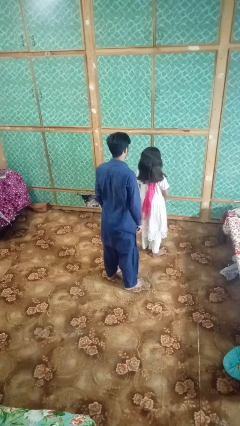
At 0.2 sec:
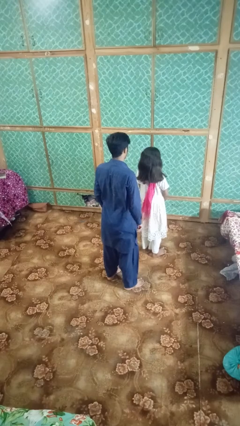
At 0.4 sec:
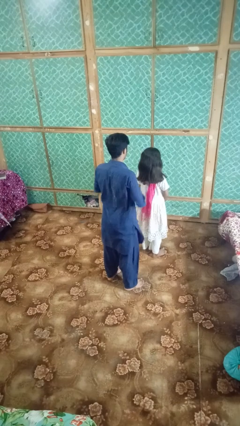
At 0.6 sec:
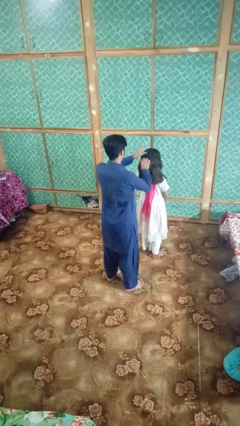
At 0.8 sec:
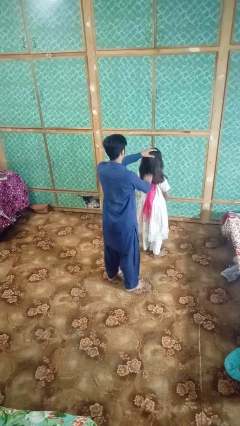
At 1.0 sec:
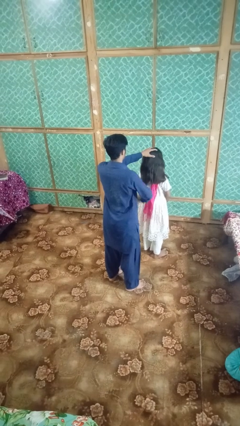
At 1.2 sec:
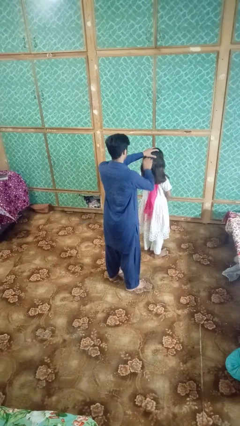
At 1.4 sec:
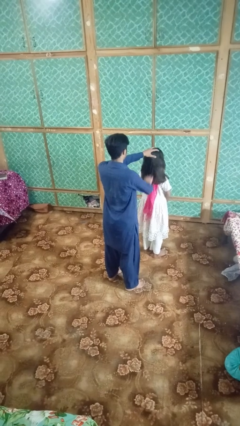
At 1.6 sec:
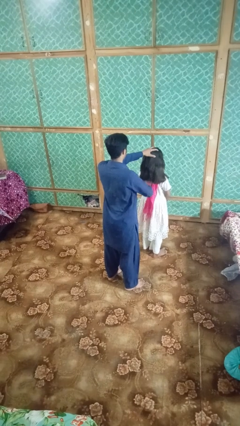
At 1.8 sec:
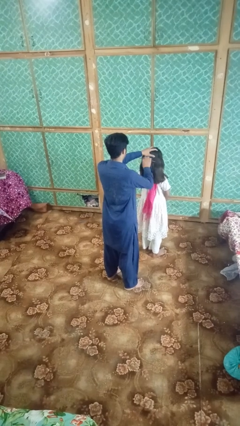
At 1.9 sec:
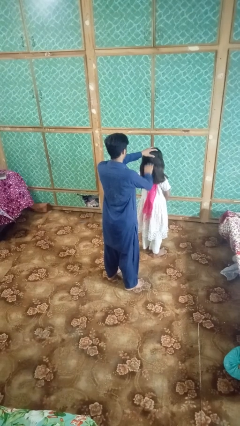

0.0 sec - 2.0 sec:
person brushes hair of person

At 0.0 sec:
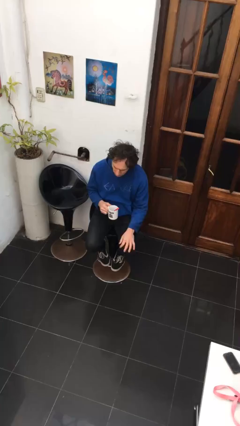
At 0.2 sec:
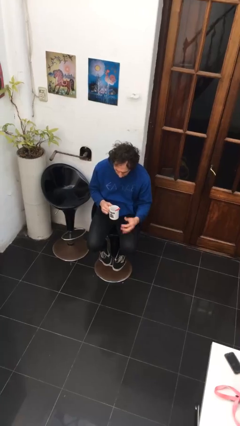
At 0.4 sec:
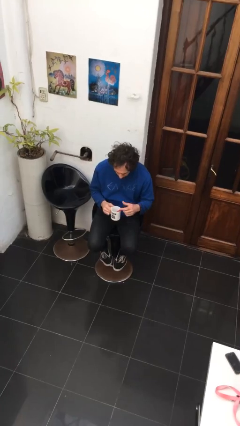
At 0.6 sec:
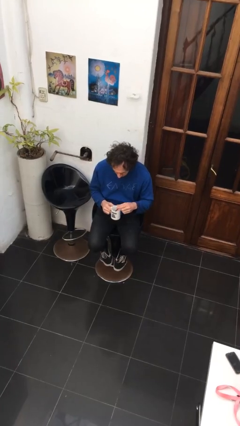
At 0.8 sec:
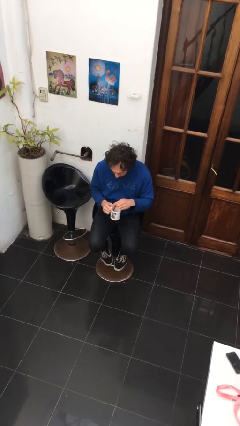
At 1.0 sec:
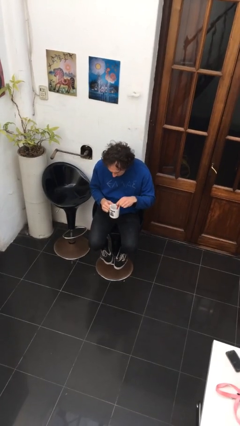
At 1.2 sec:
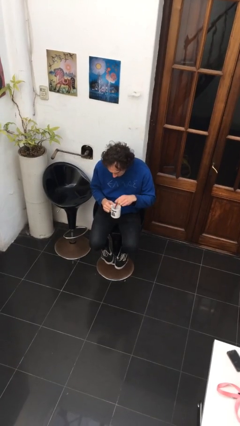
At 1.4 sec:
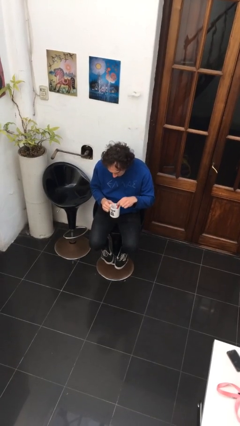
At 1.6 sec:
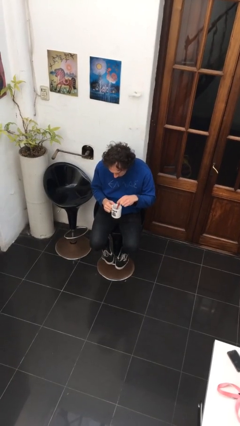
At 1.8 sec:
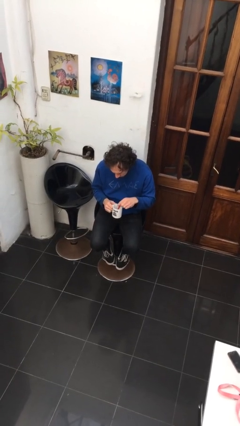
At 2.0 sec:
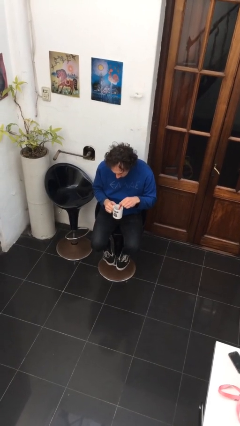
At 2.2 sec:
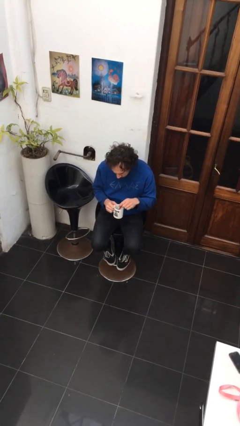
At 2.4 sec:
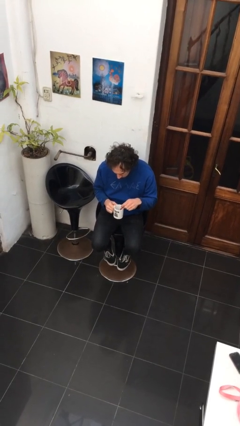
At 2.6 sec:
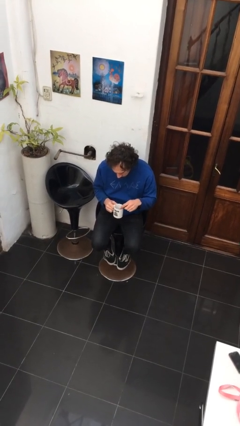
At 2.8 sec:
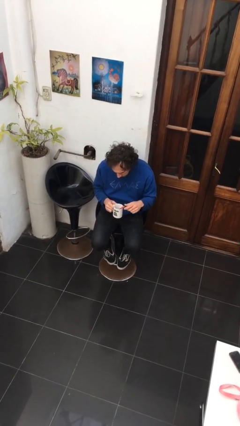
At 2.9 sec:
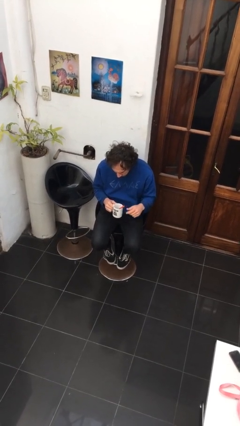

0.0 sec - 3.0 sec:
person stirs mug

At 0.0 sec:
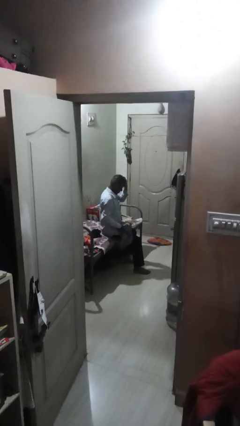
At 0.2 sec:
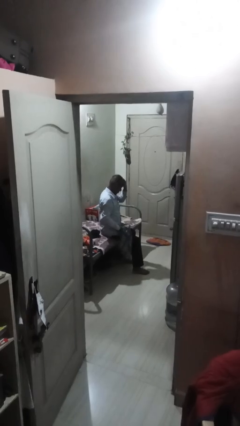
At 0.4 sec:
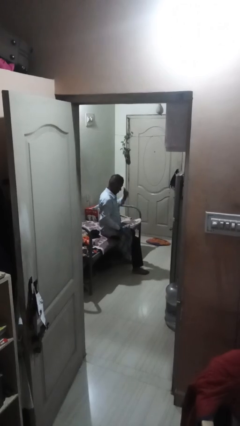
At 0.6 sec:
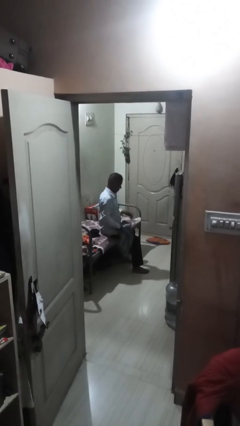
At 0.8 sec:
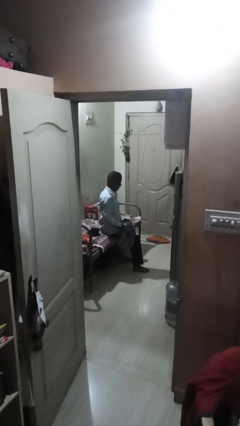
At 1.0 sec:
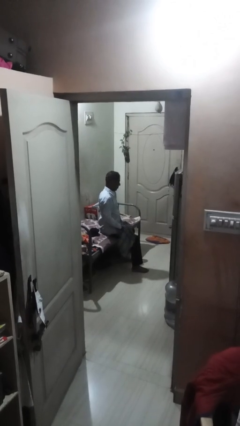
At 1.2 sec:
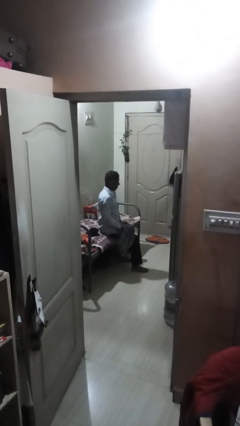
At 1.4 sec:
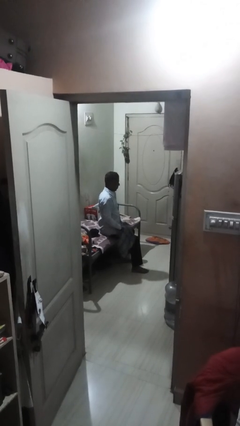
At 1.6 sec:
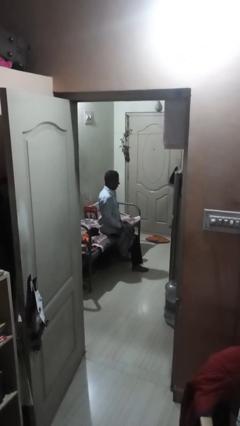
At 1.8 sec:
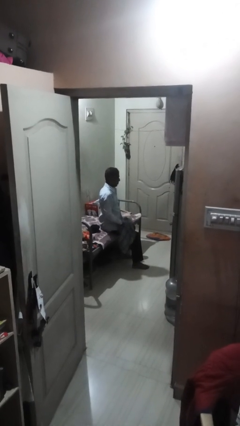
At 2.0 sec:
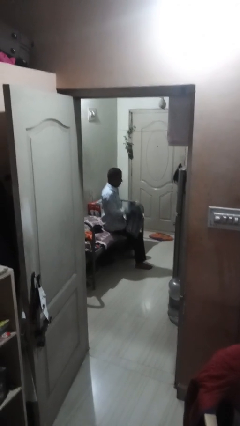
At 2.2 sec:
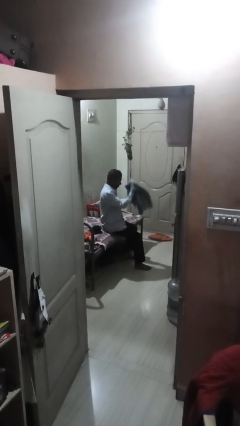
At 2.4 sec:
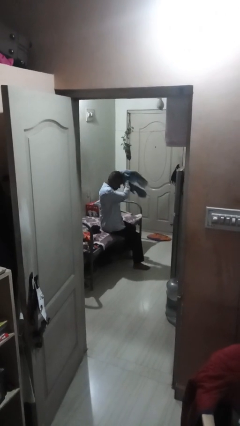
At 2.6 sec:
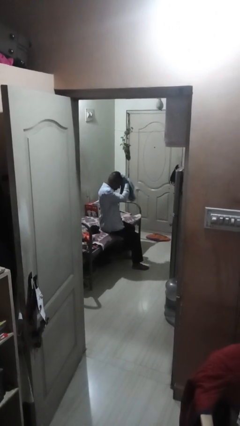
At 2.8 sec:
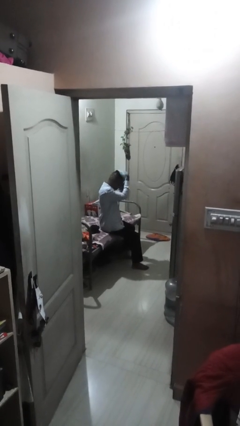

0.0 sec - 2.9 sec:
person gestures listen closely

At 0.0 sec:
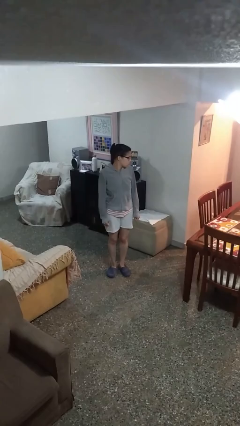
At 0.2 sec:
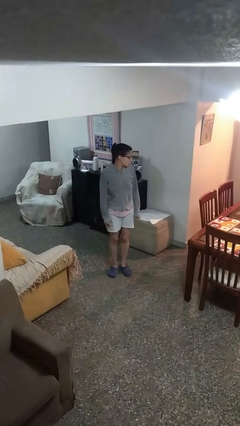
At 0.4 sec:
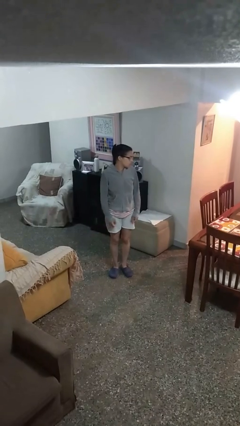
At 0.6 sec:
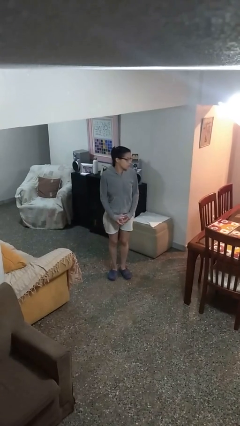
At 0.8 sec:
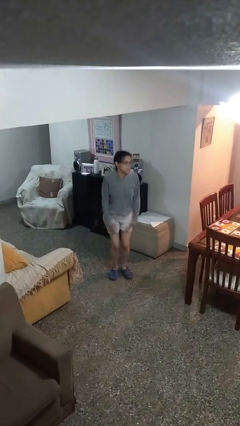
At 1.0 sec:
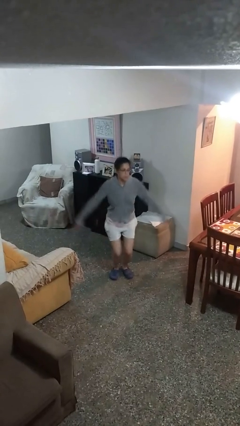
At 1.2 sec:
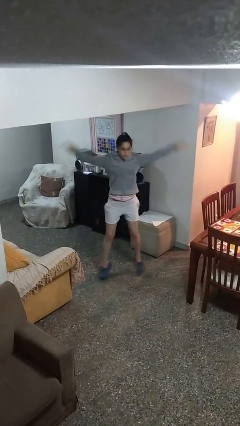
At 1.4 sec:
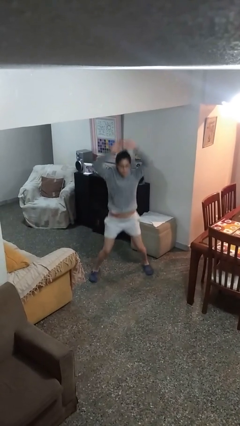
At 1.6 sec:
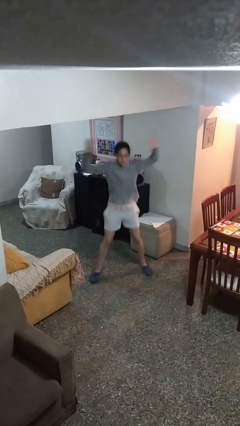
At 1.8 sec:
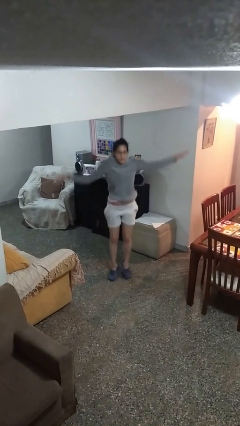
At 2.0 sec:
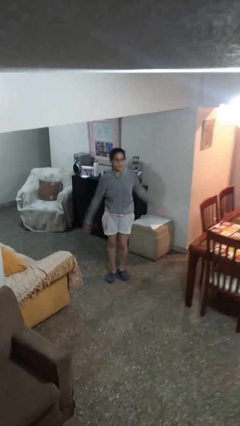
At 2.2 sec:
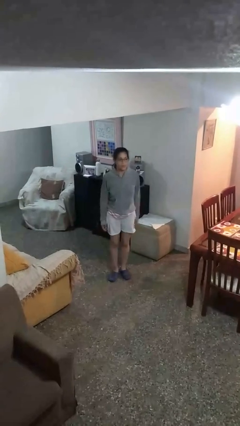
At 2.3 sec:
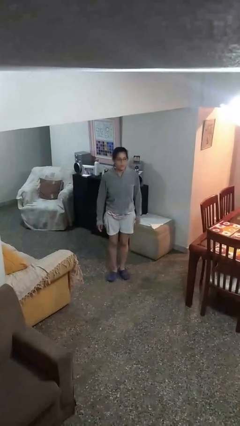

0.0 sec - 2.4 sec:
person exercises with jumping jacks

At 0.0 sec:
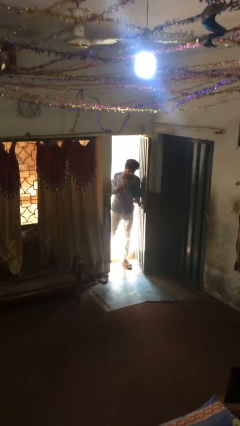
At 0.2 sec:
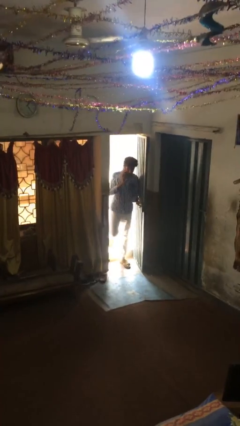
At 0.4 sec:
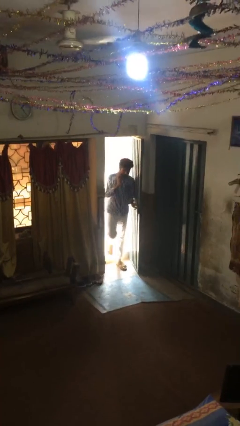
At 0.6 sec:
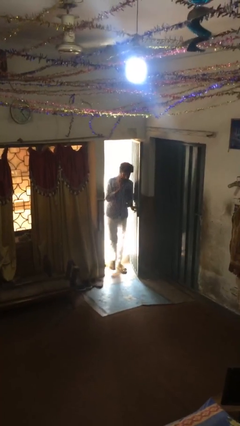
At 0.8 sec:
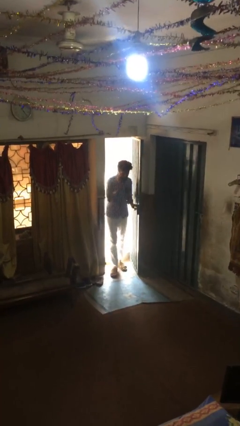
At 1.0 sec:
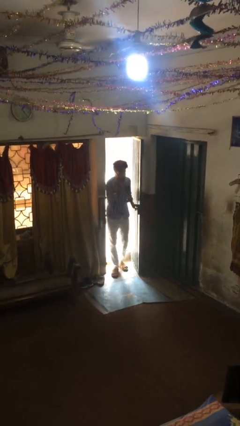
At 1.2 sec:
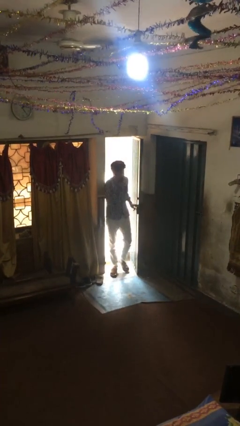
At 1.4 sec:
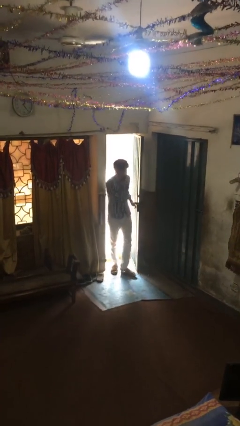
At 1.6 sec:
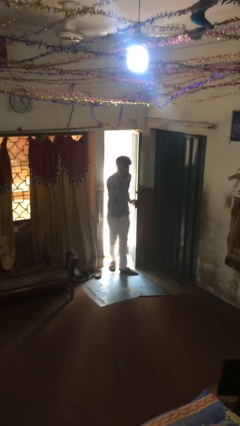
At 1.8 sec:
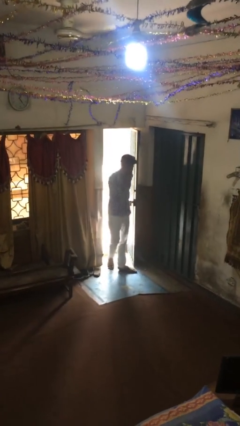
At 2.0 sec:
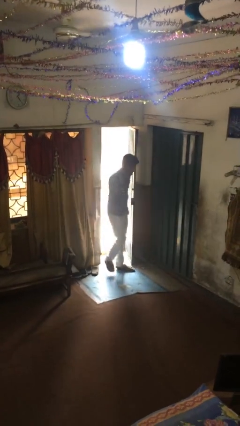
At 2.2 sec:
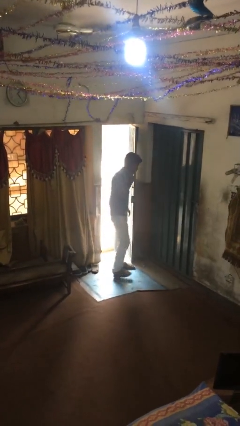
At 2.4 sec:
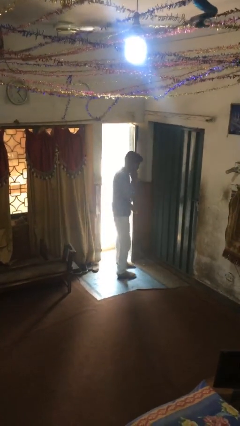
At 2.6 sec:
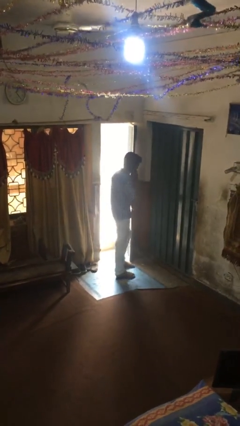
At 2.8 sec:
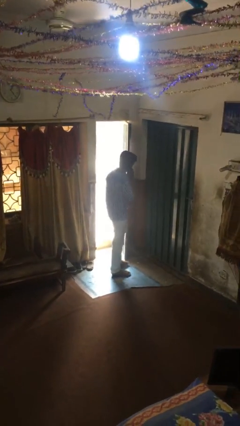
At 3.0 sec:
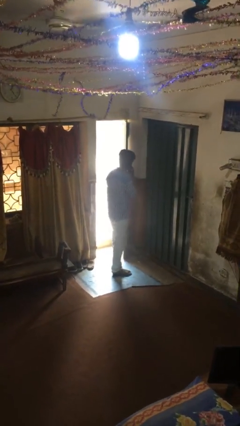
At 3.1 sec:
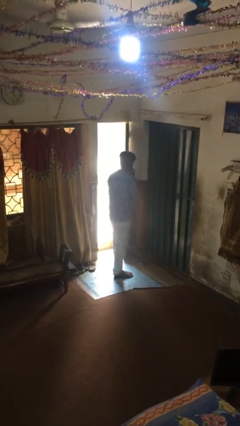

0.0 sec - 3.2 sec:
person enters scene through structure

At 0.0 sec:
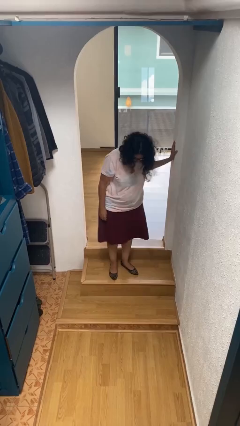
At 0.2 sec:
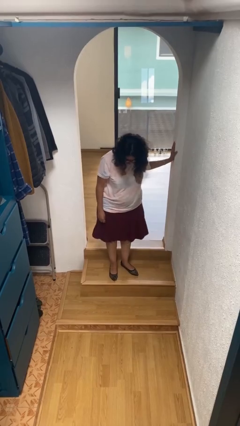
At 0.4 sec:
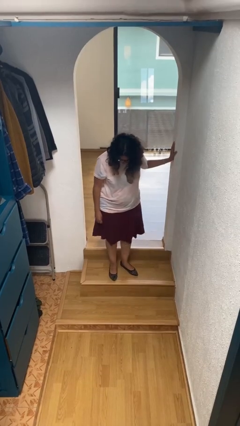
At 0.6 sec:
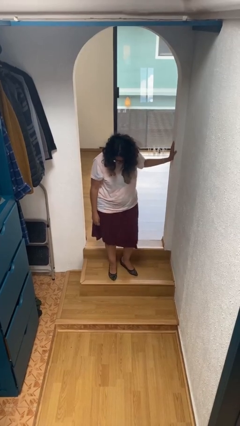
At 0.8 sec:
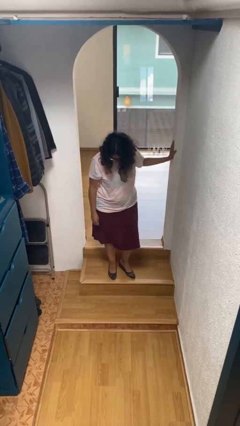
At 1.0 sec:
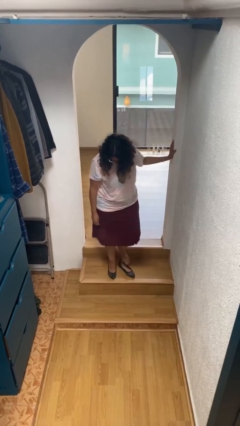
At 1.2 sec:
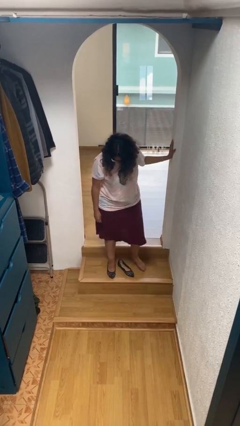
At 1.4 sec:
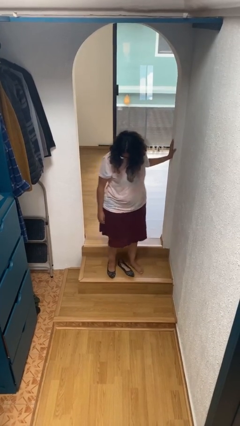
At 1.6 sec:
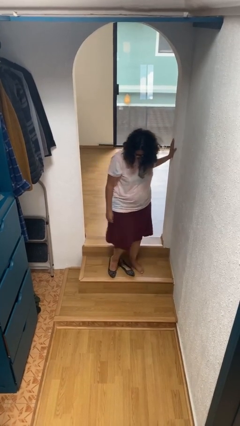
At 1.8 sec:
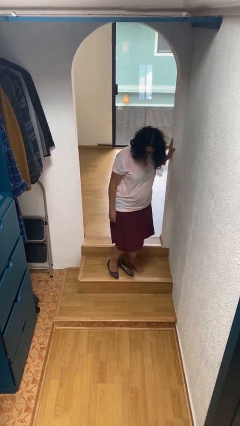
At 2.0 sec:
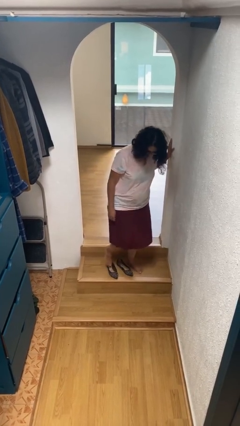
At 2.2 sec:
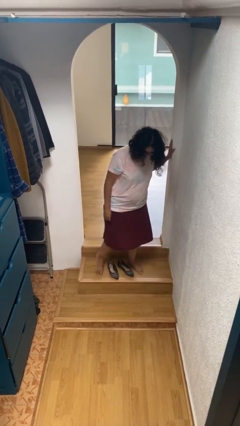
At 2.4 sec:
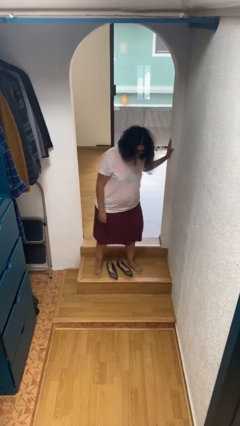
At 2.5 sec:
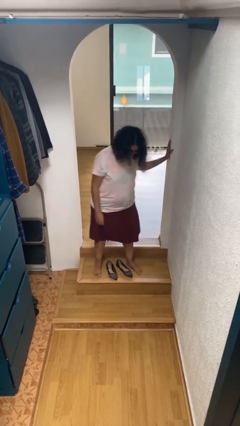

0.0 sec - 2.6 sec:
person takes off shoes

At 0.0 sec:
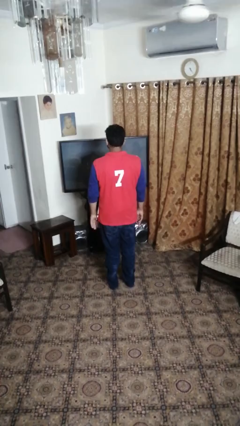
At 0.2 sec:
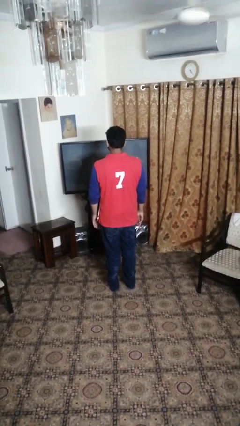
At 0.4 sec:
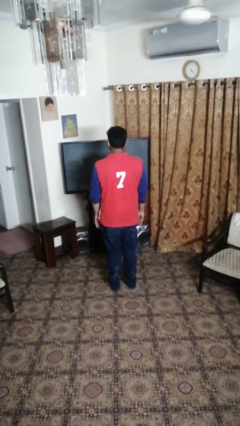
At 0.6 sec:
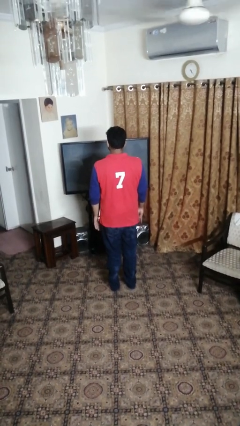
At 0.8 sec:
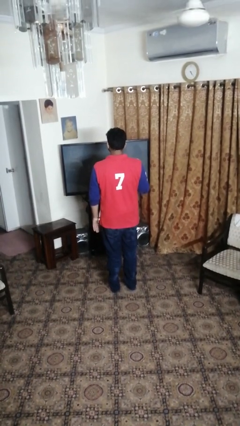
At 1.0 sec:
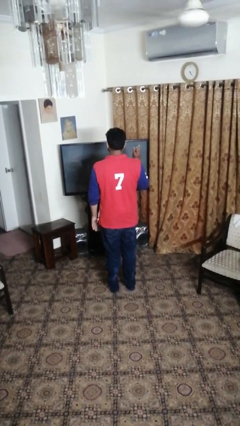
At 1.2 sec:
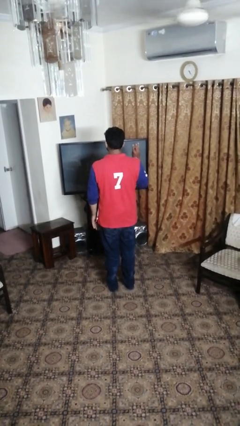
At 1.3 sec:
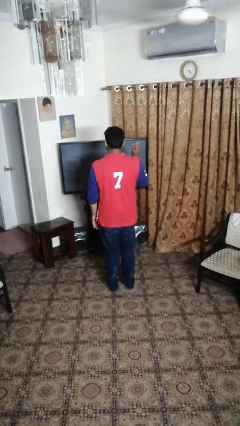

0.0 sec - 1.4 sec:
person gestures number three
